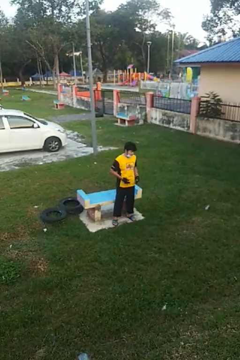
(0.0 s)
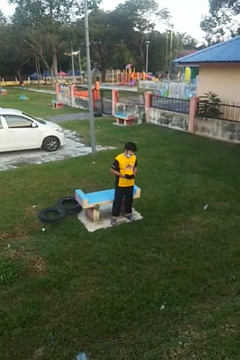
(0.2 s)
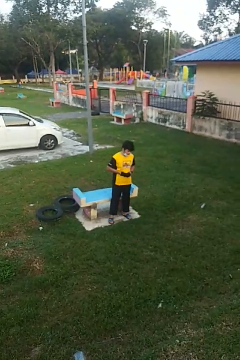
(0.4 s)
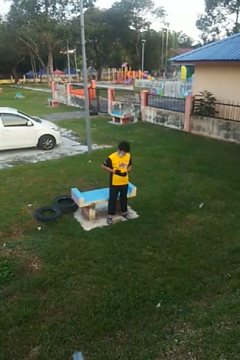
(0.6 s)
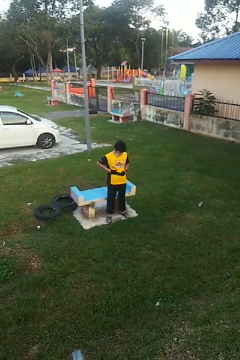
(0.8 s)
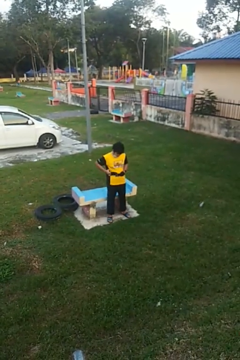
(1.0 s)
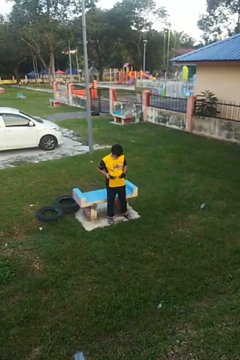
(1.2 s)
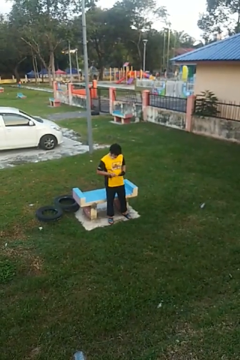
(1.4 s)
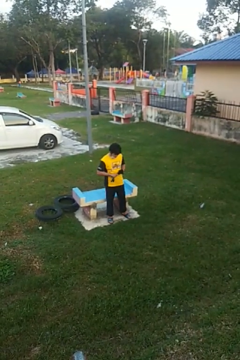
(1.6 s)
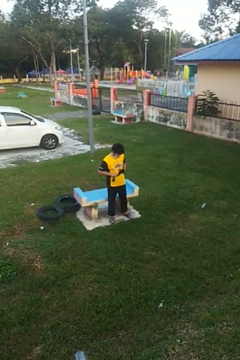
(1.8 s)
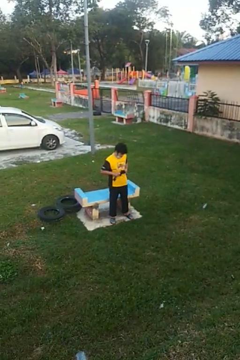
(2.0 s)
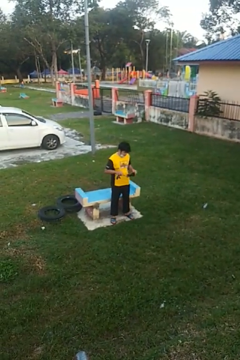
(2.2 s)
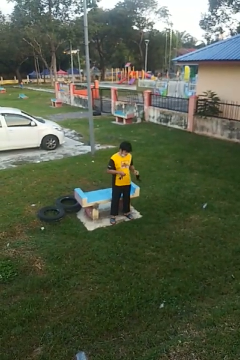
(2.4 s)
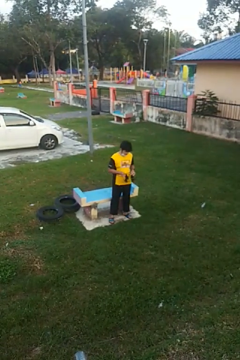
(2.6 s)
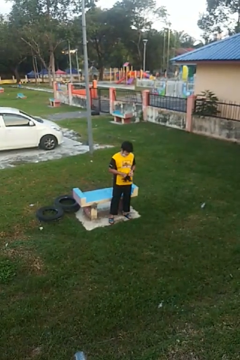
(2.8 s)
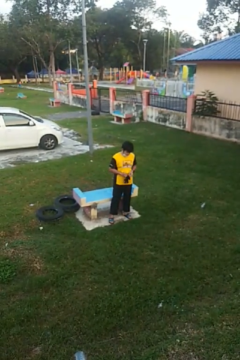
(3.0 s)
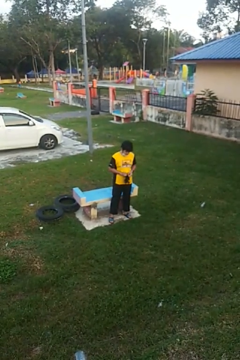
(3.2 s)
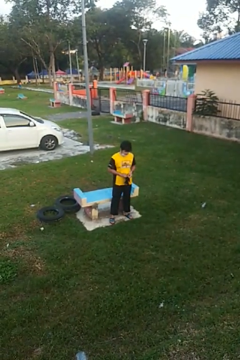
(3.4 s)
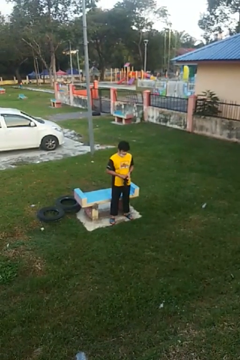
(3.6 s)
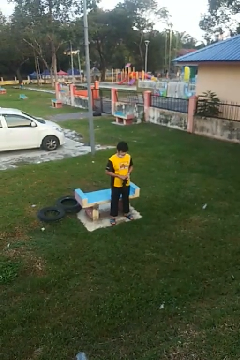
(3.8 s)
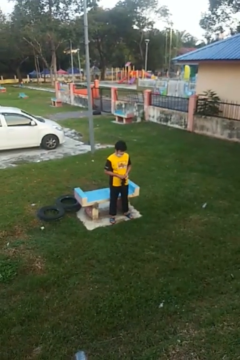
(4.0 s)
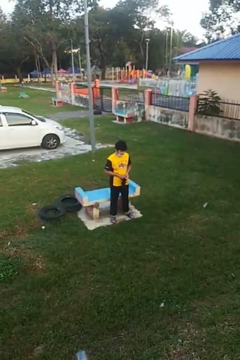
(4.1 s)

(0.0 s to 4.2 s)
person takes off gloves

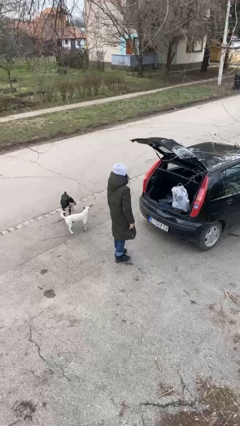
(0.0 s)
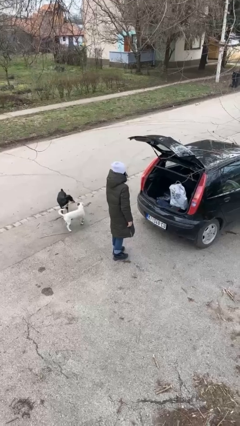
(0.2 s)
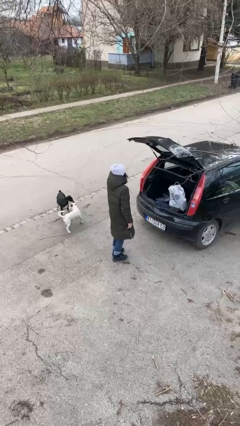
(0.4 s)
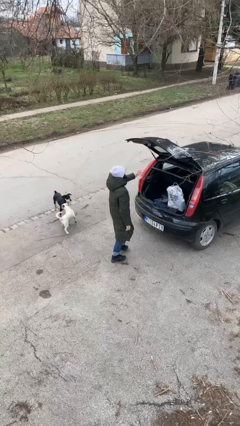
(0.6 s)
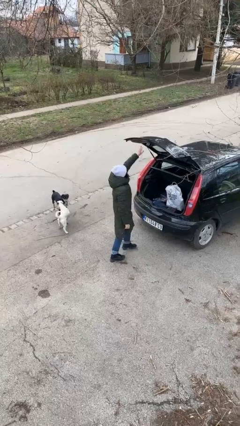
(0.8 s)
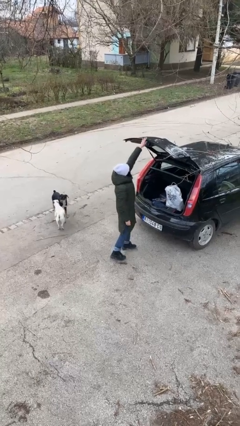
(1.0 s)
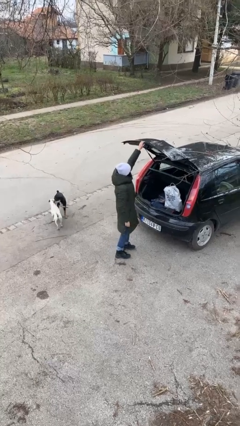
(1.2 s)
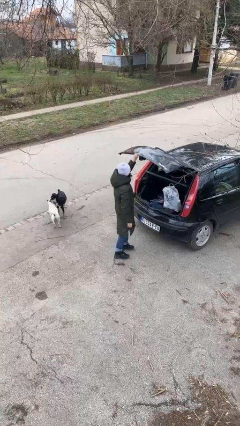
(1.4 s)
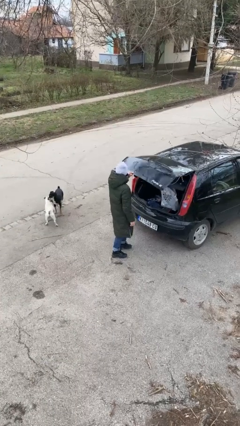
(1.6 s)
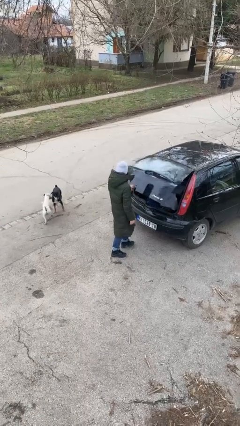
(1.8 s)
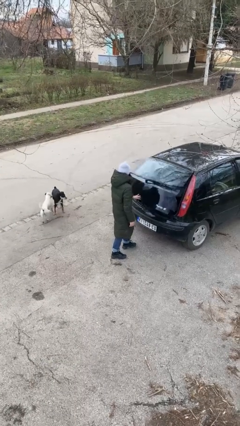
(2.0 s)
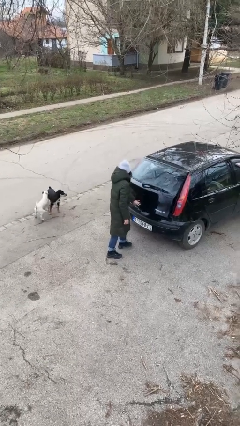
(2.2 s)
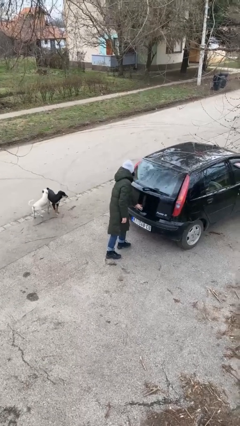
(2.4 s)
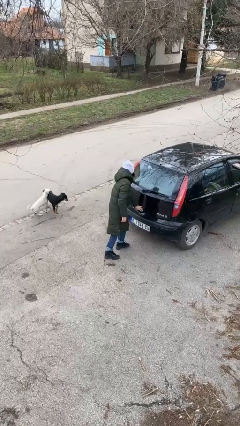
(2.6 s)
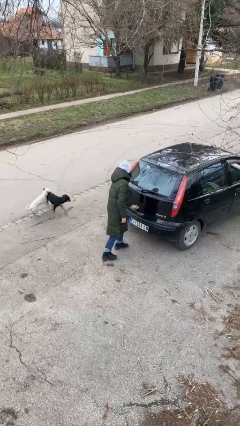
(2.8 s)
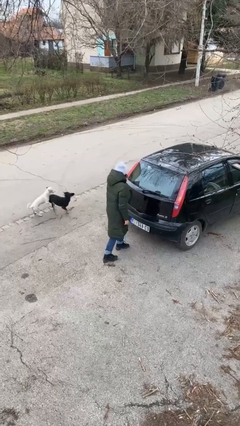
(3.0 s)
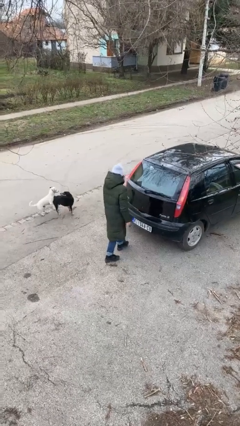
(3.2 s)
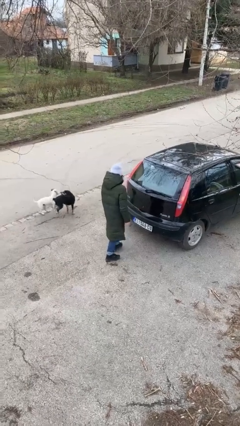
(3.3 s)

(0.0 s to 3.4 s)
person closes car trunk

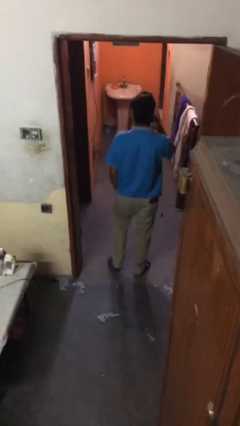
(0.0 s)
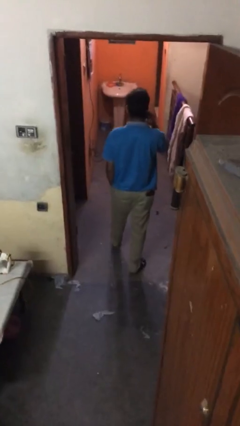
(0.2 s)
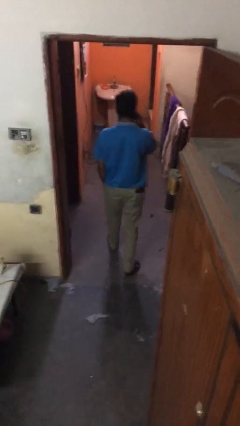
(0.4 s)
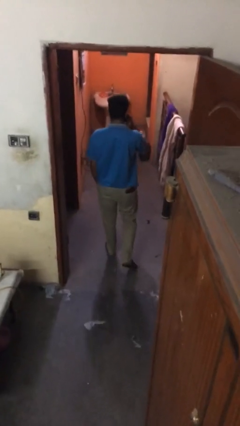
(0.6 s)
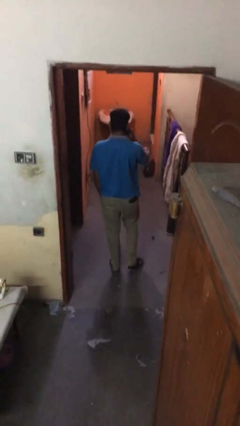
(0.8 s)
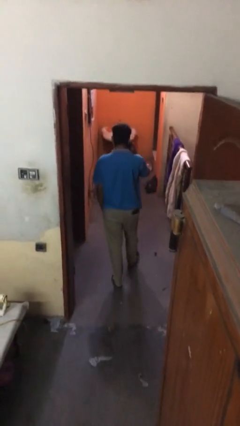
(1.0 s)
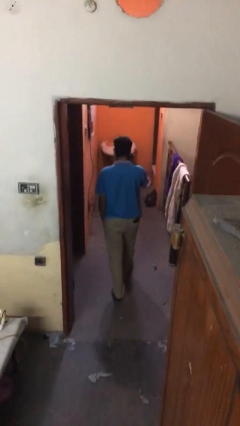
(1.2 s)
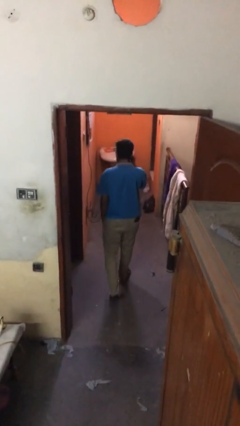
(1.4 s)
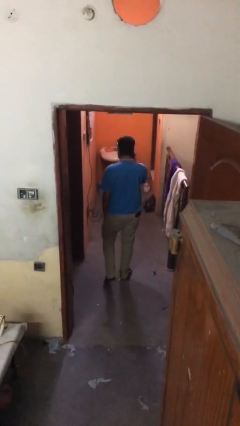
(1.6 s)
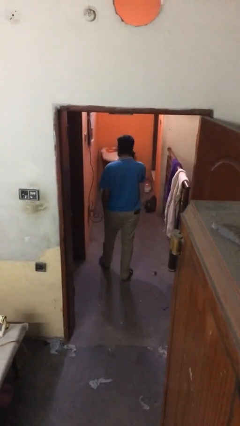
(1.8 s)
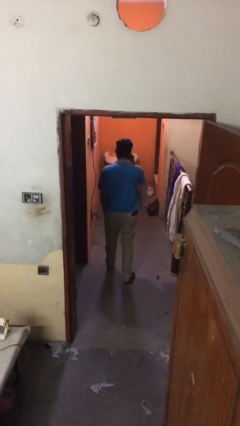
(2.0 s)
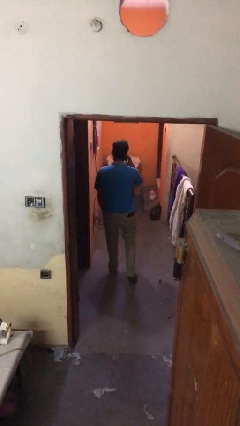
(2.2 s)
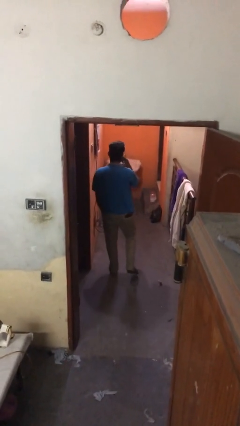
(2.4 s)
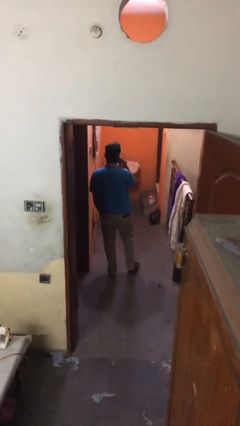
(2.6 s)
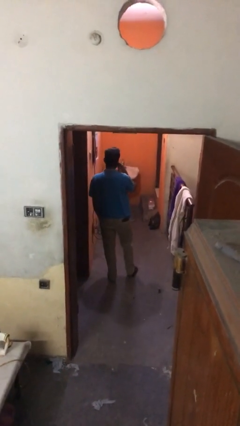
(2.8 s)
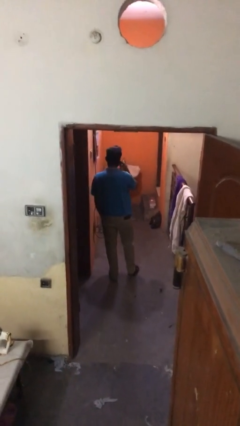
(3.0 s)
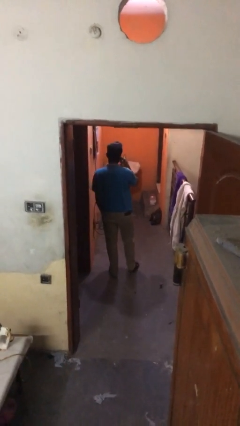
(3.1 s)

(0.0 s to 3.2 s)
person exits scene through structure

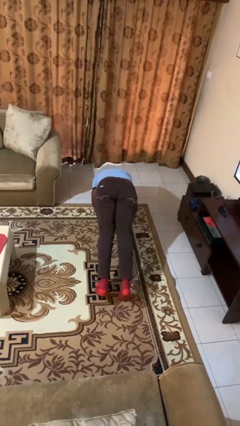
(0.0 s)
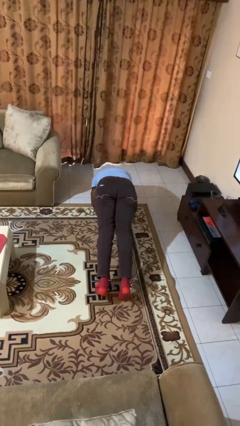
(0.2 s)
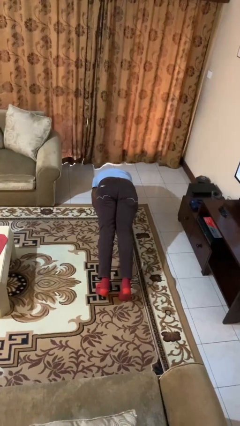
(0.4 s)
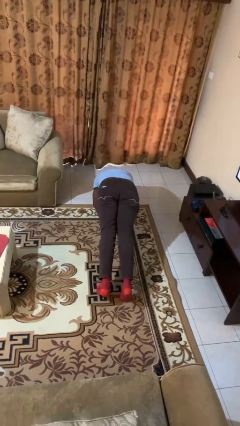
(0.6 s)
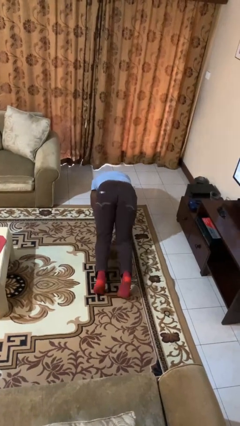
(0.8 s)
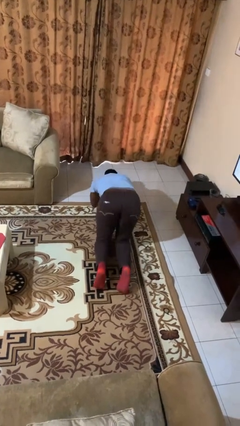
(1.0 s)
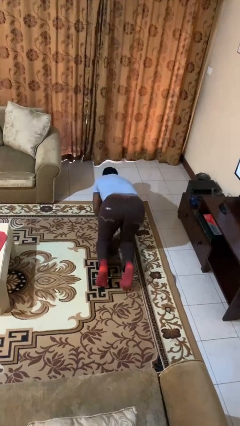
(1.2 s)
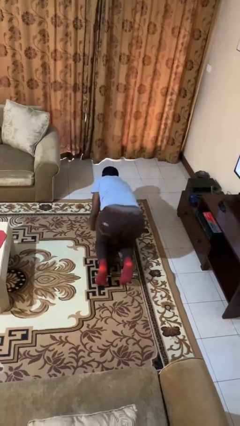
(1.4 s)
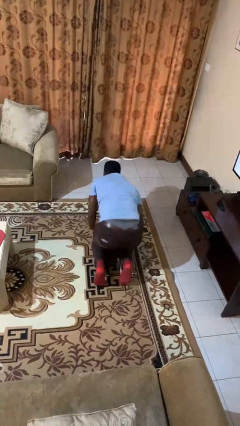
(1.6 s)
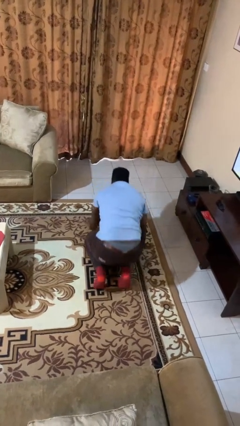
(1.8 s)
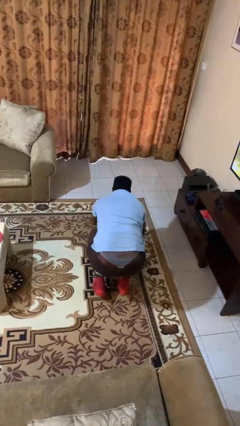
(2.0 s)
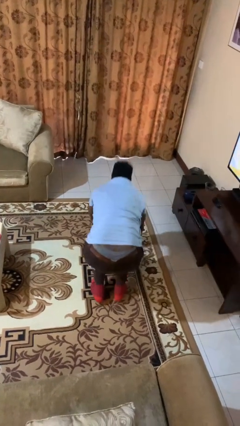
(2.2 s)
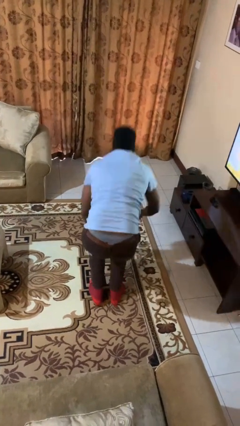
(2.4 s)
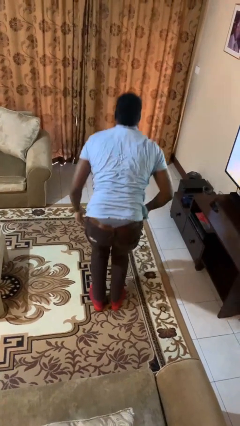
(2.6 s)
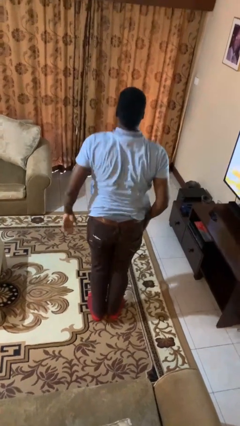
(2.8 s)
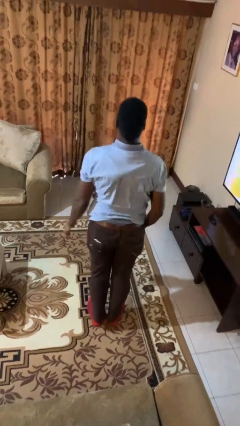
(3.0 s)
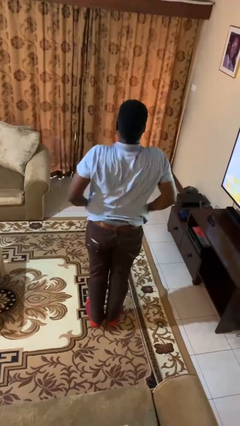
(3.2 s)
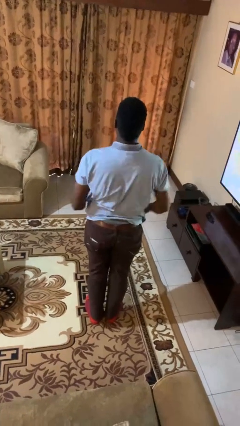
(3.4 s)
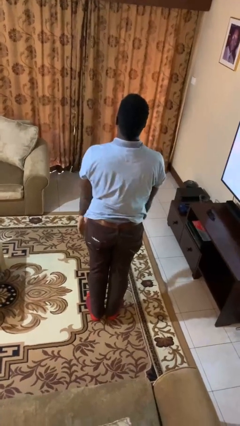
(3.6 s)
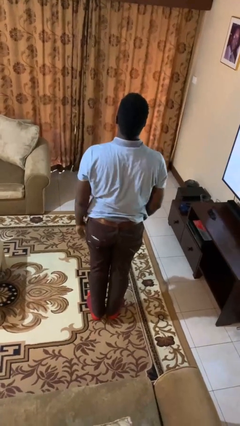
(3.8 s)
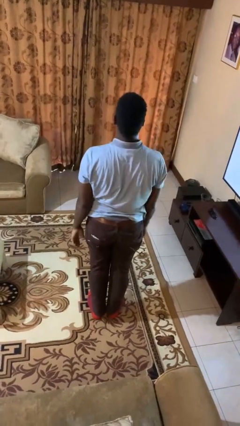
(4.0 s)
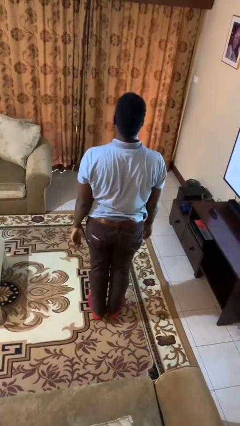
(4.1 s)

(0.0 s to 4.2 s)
person stands up from floor

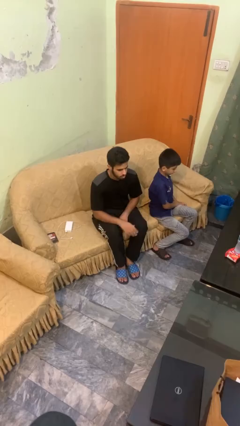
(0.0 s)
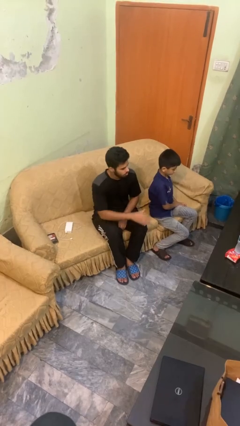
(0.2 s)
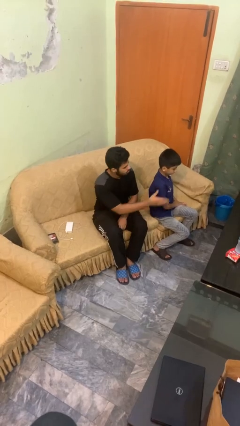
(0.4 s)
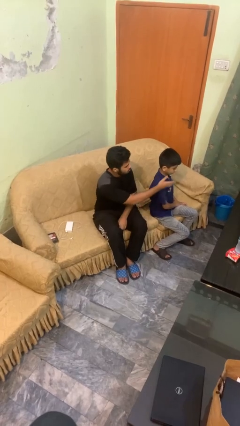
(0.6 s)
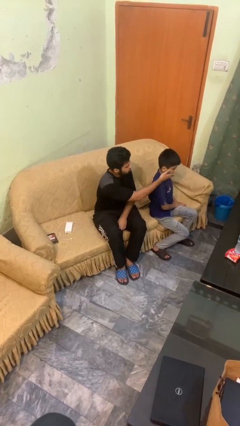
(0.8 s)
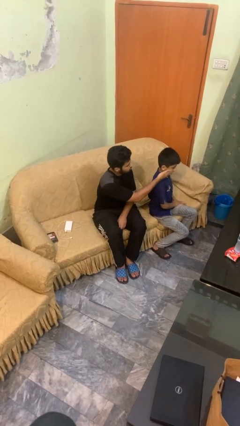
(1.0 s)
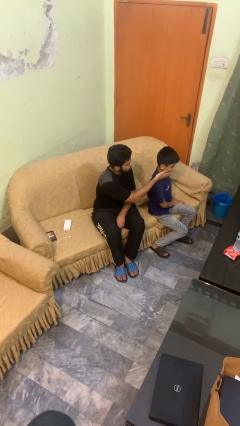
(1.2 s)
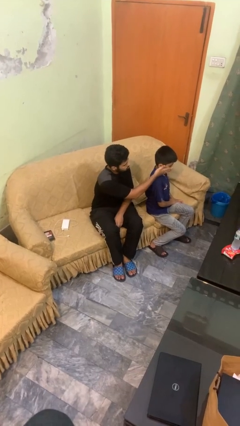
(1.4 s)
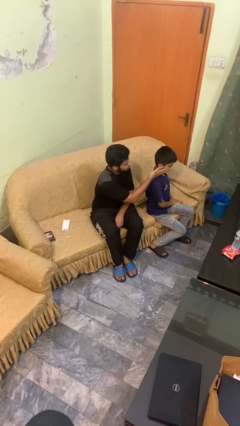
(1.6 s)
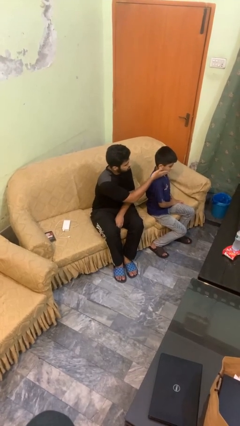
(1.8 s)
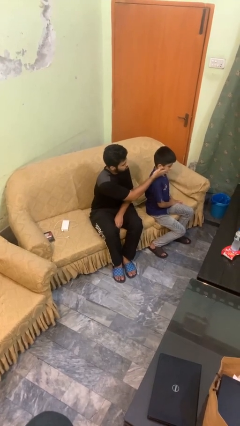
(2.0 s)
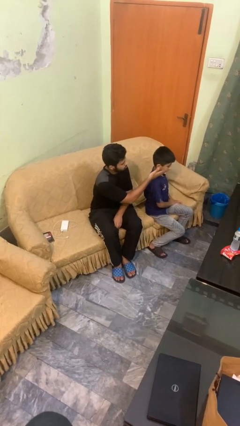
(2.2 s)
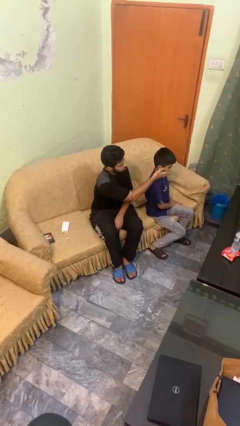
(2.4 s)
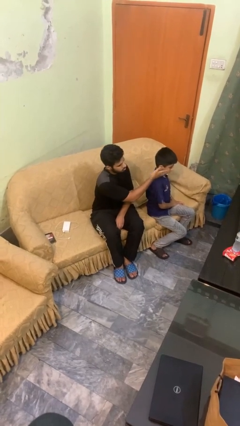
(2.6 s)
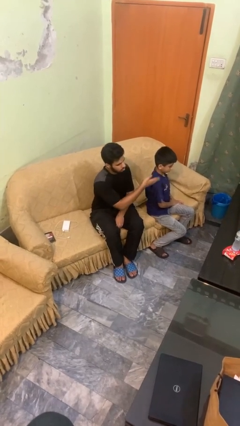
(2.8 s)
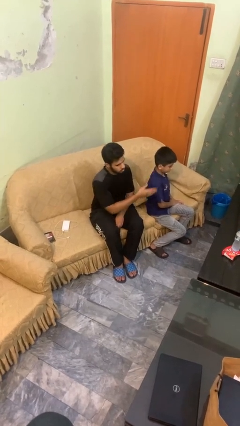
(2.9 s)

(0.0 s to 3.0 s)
person touches face of person

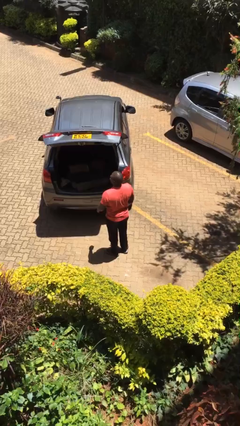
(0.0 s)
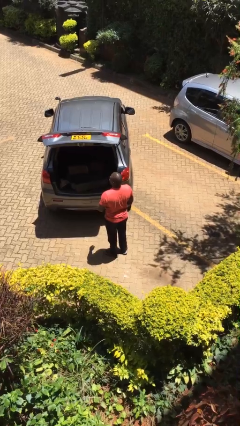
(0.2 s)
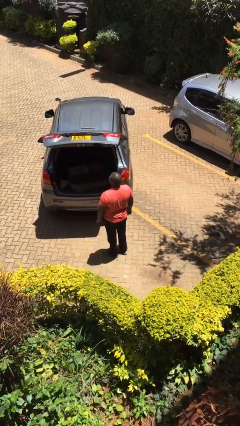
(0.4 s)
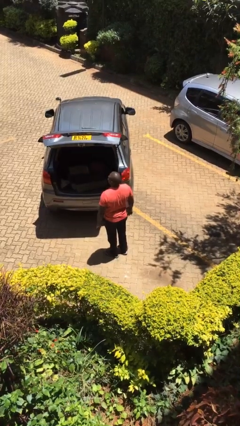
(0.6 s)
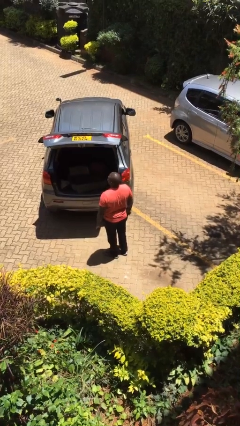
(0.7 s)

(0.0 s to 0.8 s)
person unloads car
